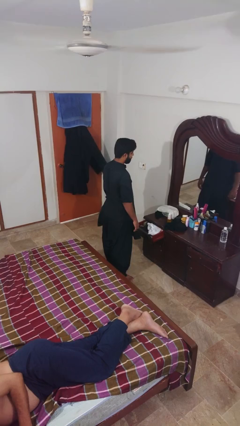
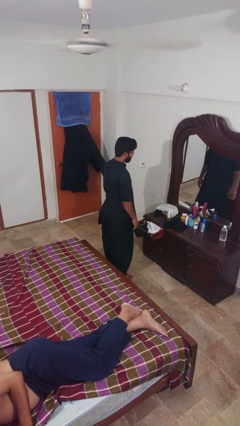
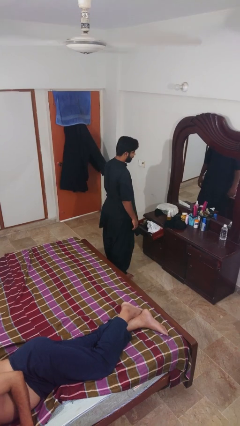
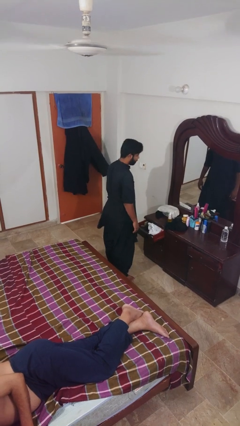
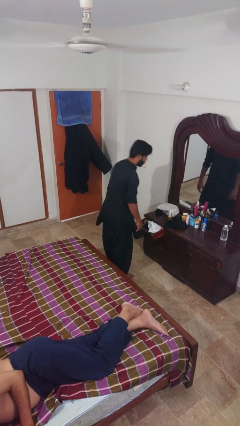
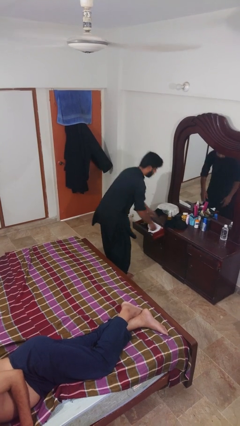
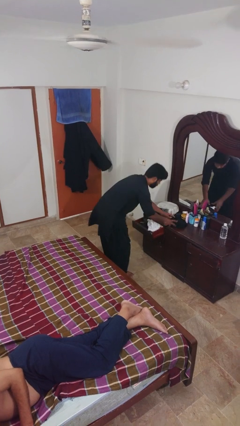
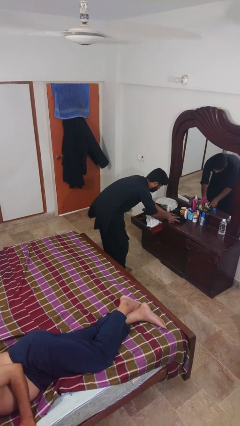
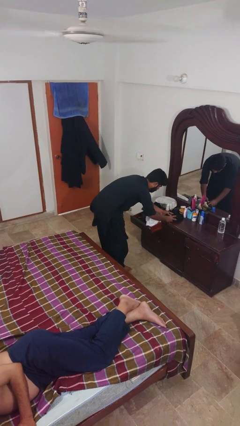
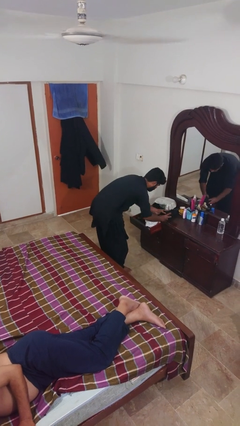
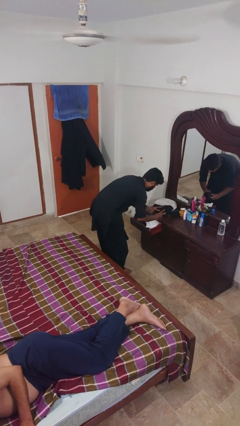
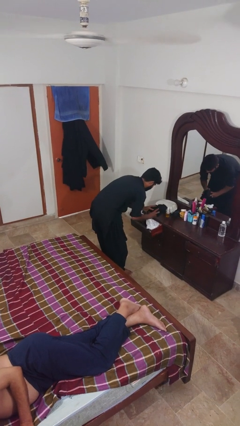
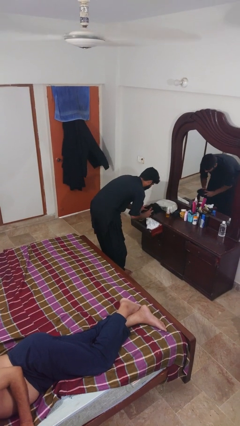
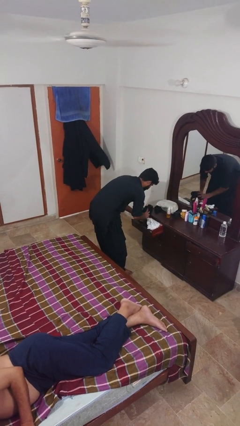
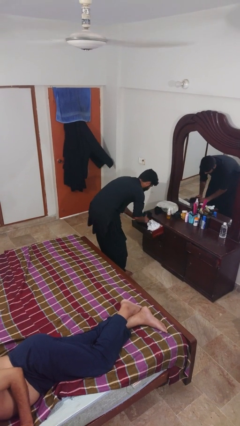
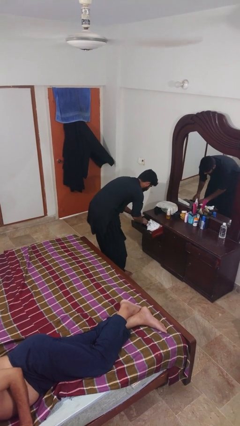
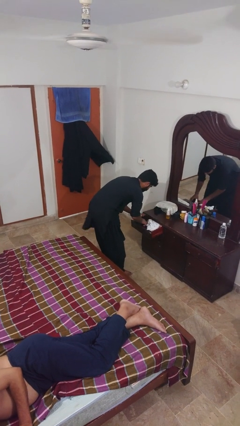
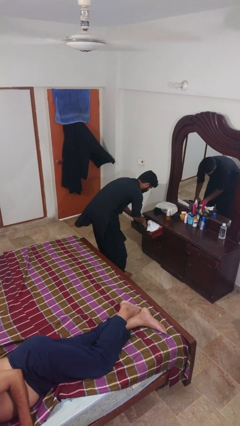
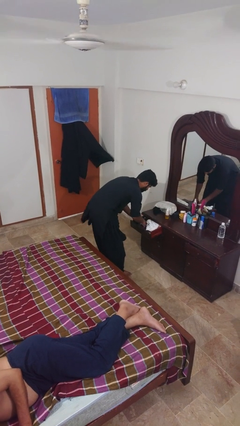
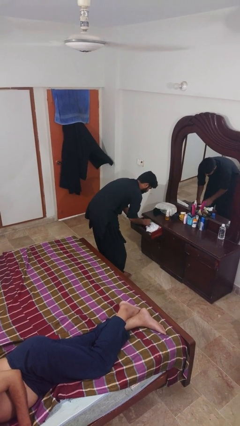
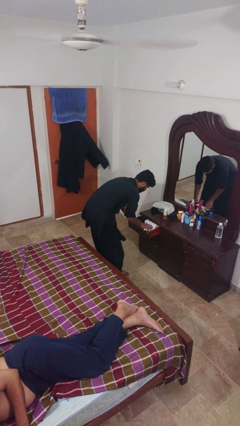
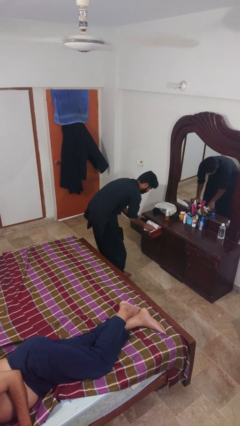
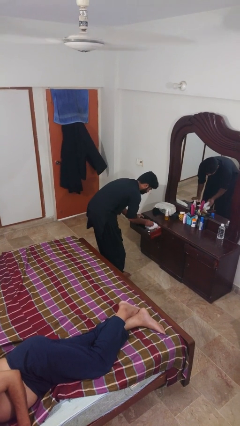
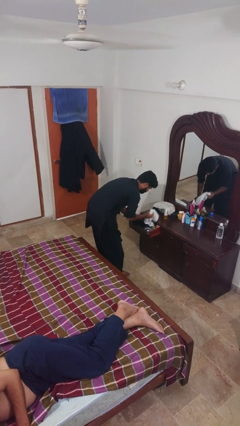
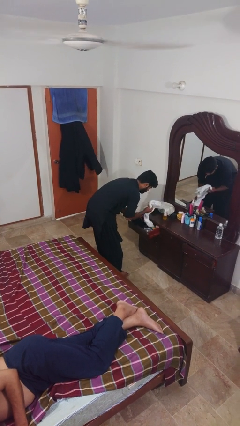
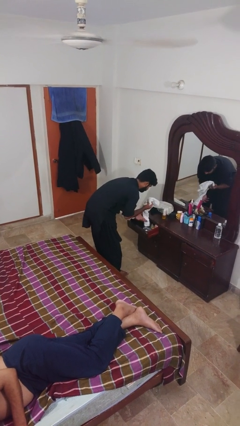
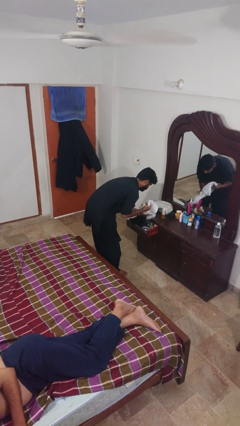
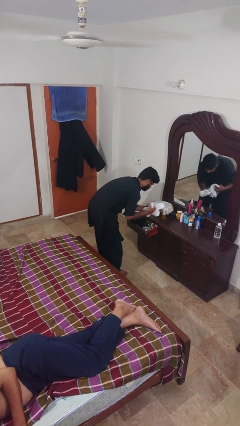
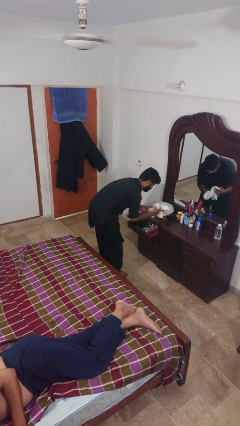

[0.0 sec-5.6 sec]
person puts clothes into dresser

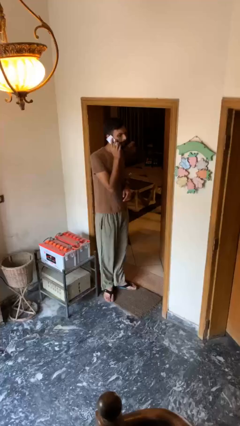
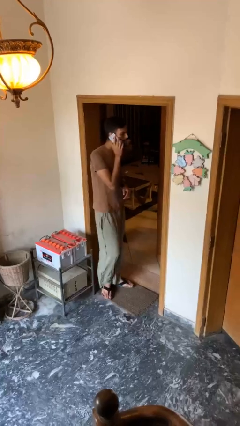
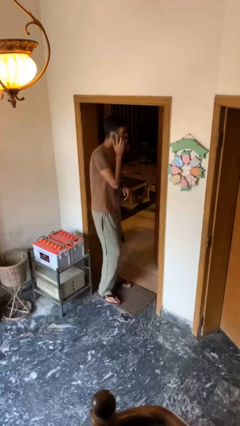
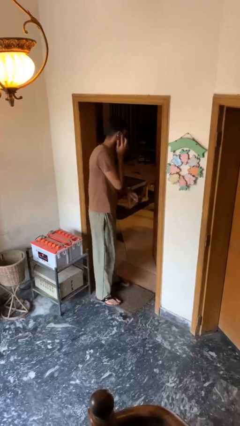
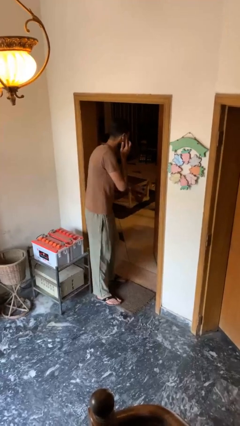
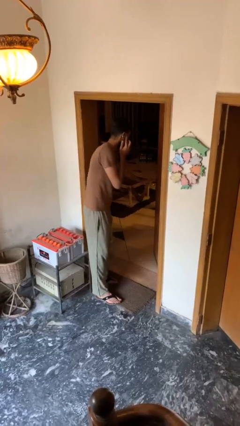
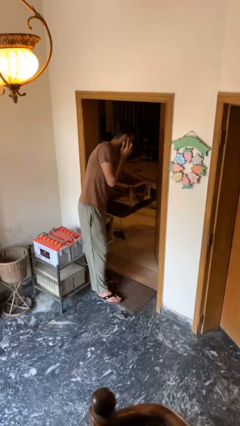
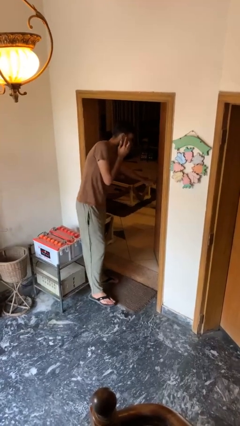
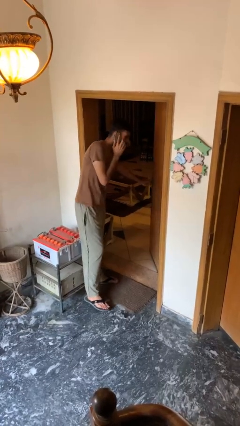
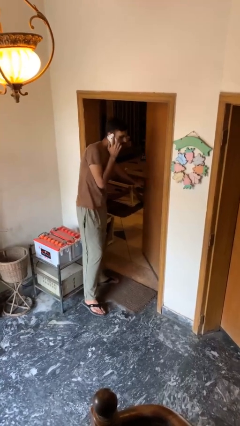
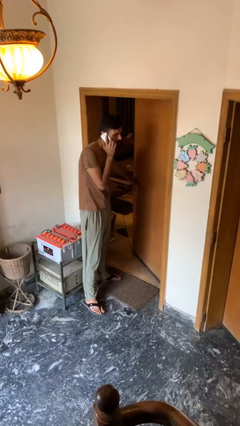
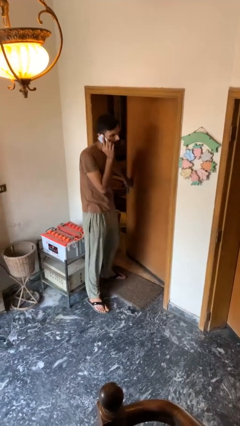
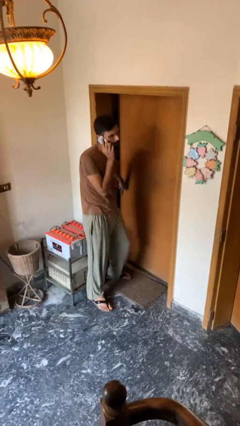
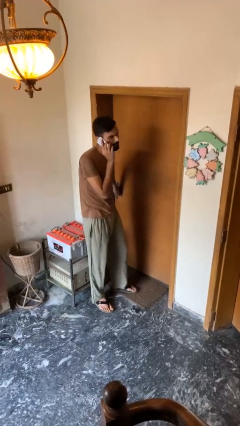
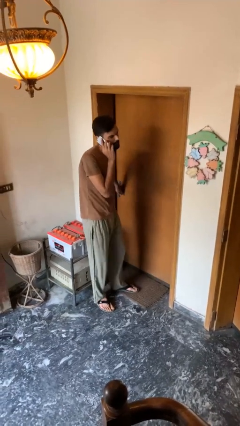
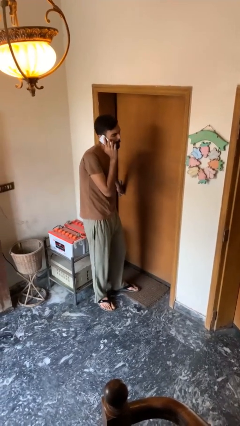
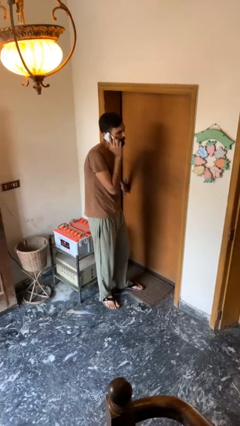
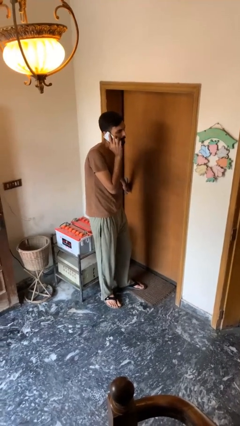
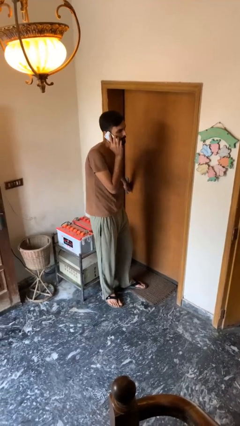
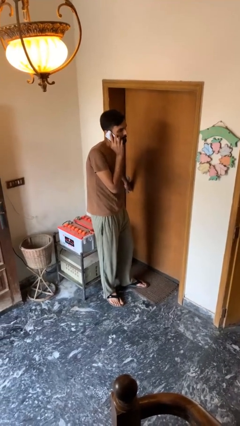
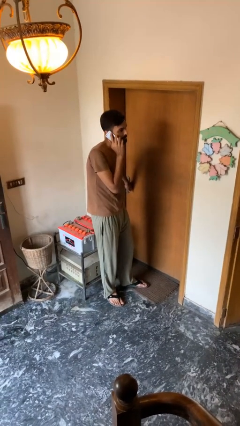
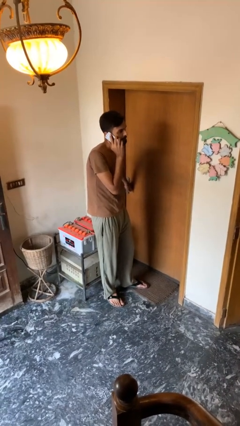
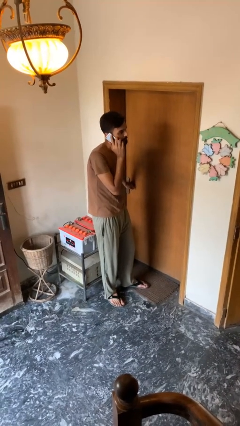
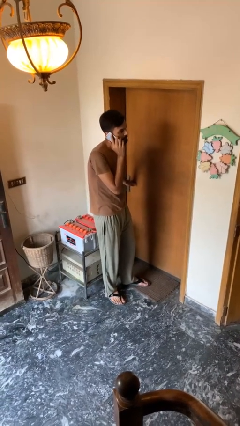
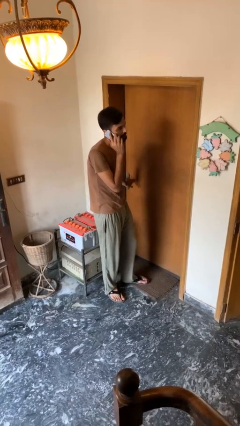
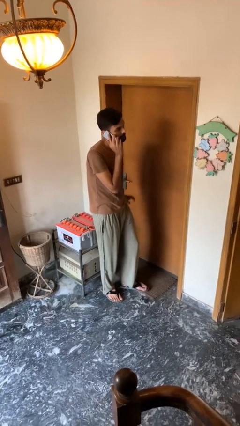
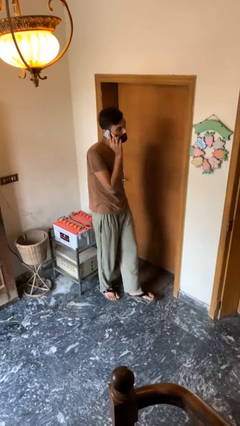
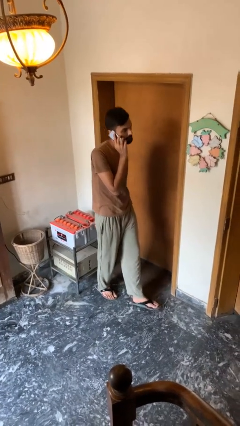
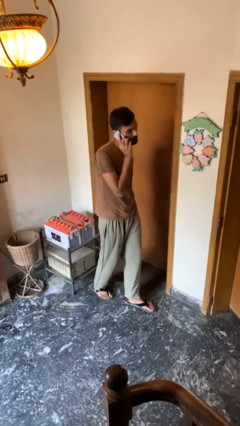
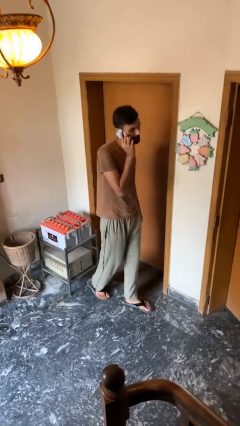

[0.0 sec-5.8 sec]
person closes facility door

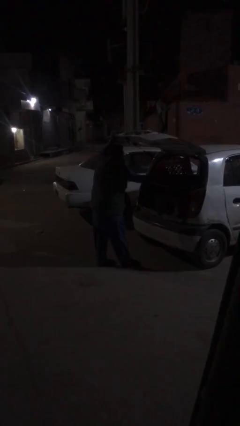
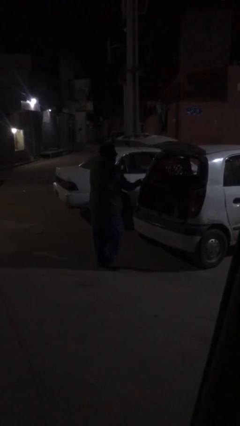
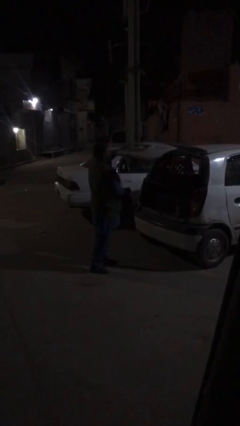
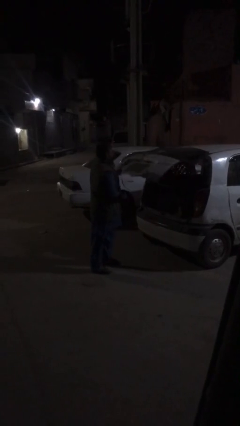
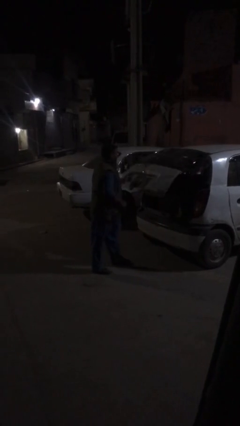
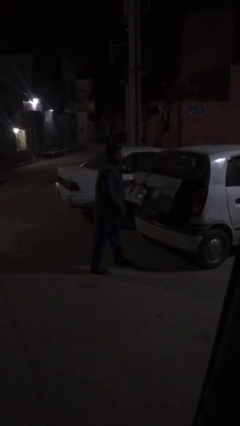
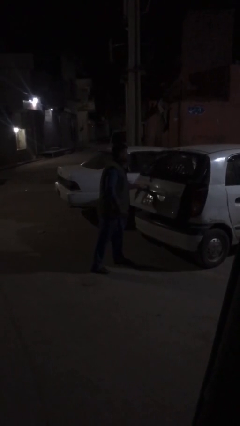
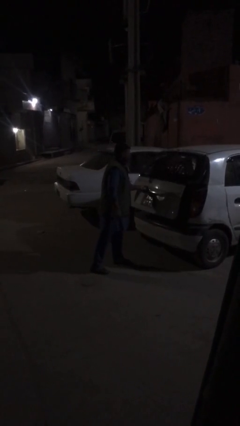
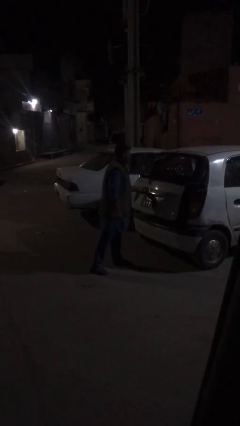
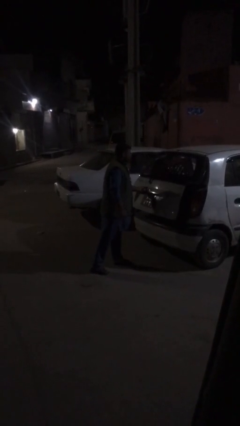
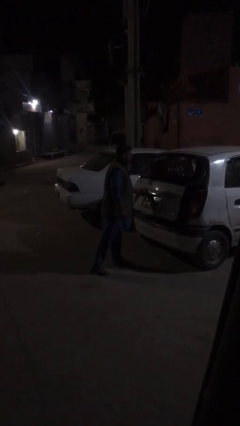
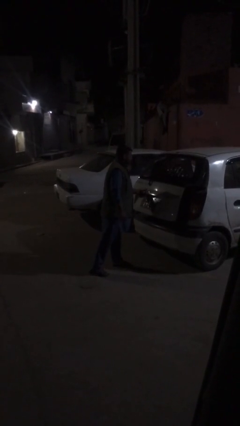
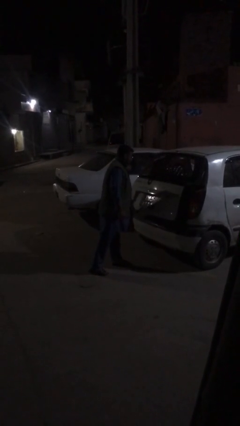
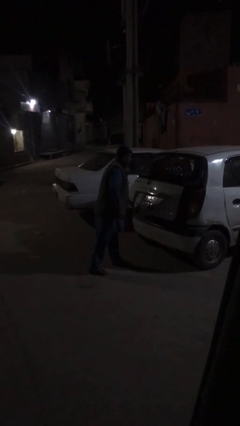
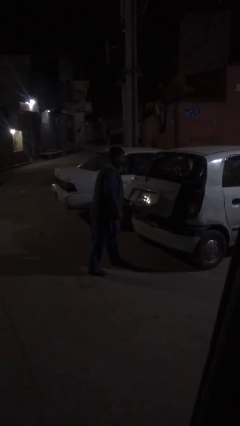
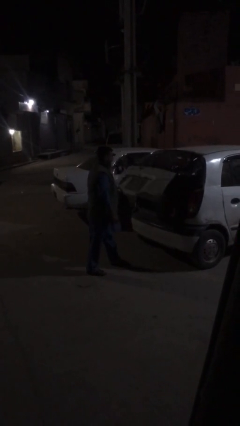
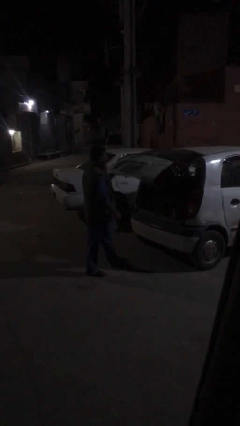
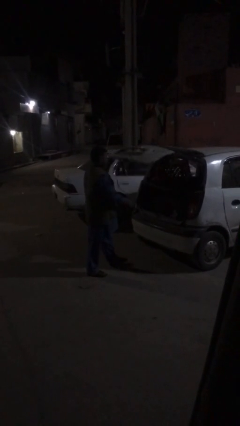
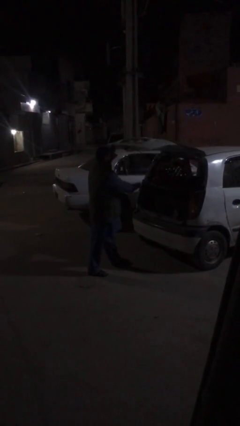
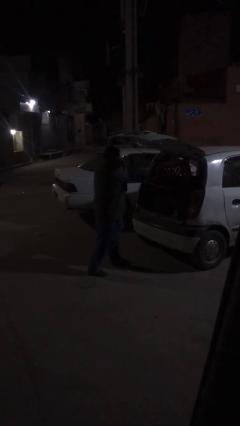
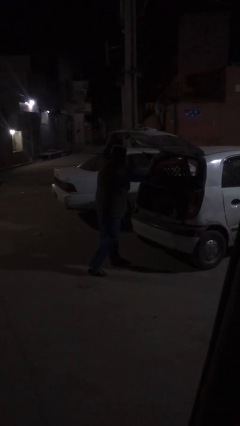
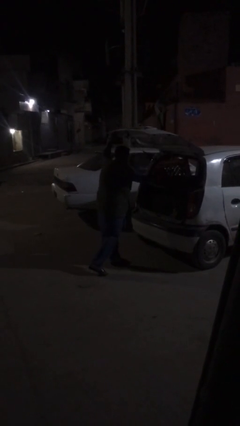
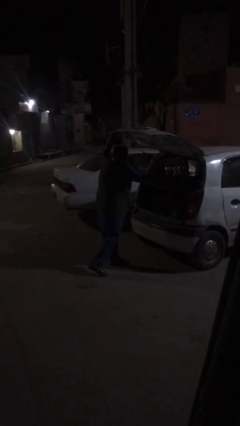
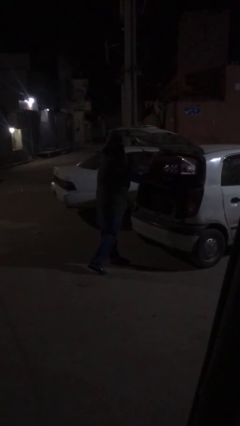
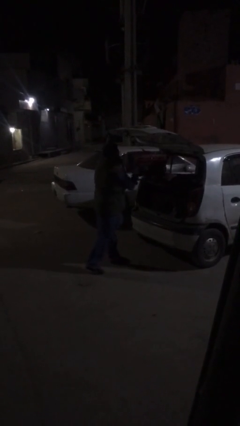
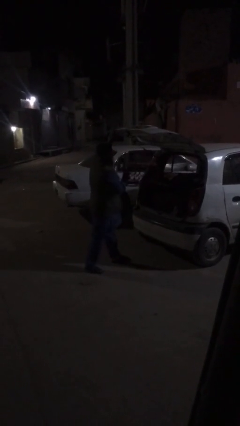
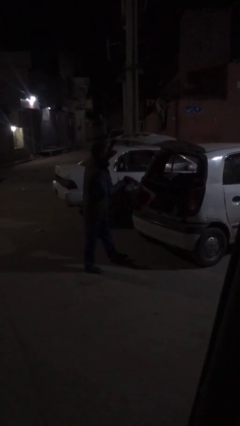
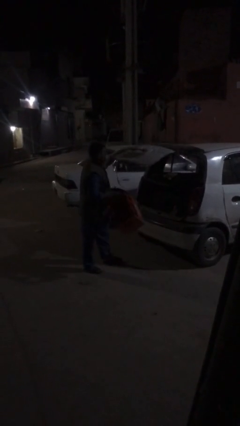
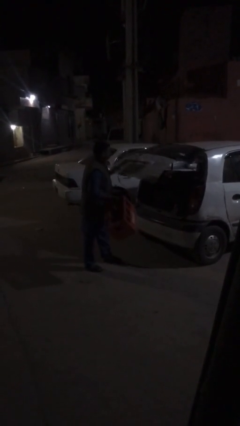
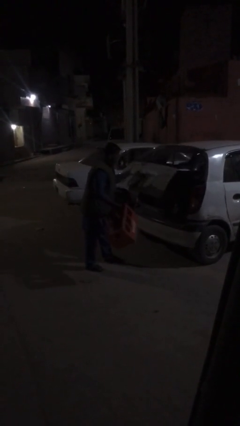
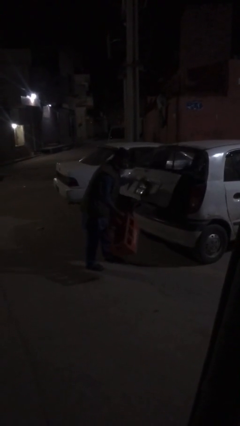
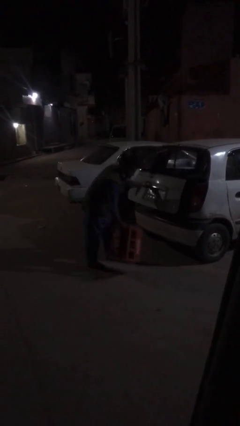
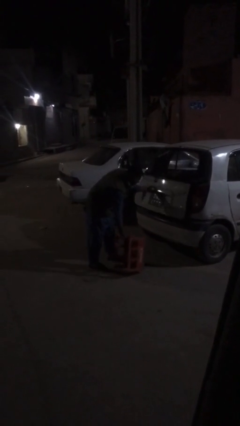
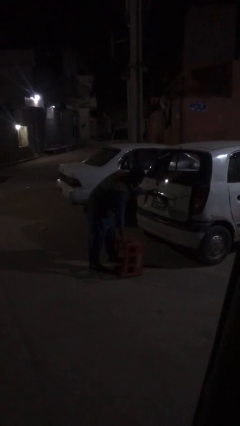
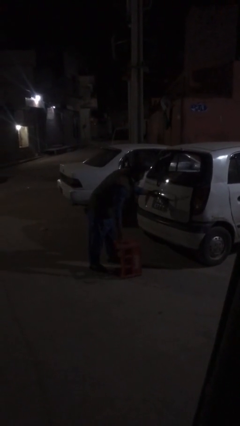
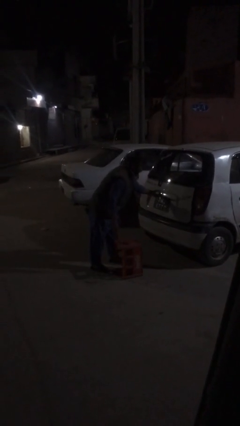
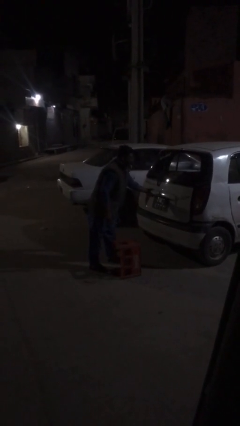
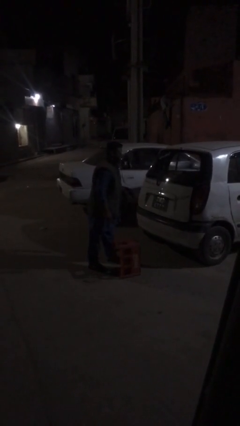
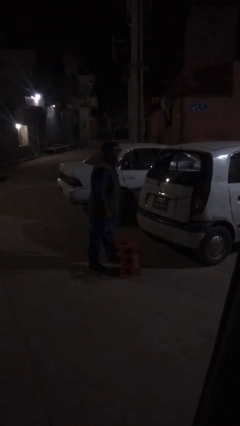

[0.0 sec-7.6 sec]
person unloads car
